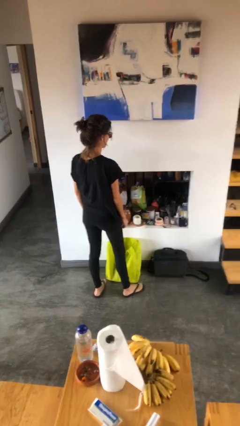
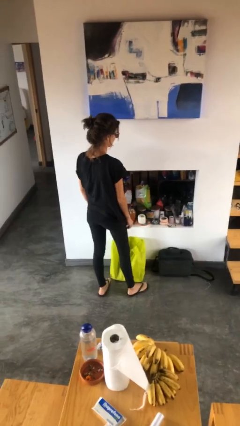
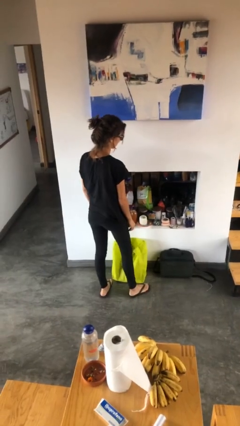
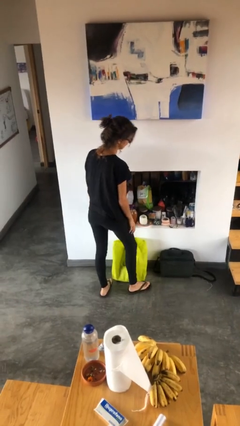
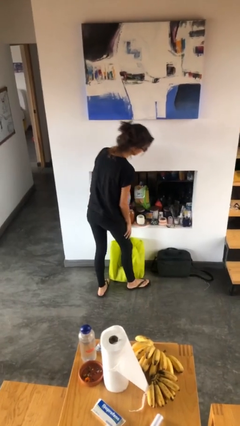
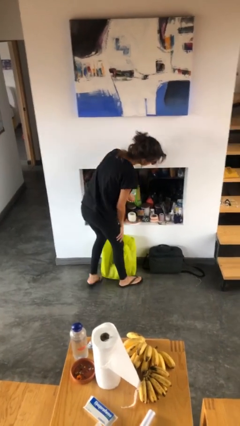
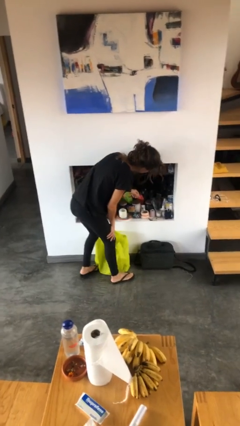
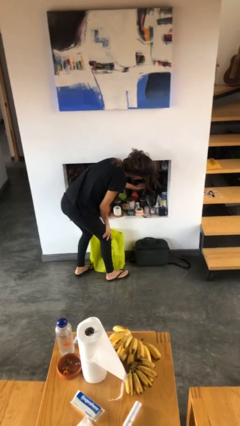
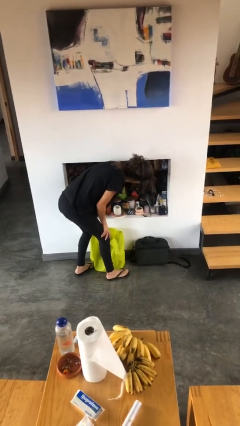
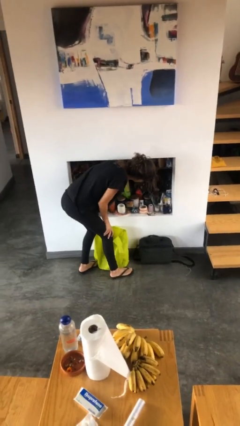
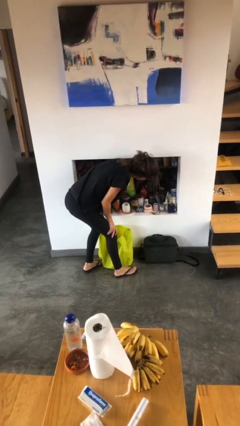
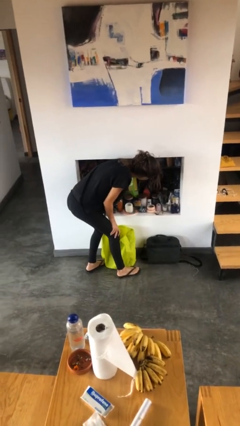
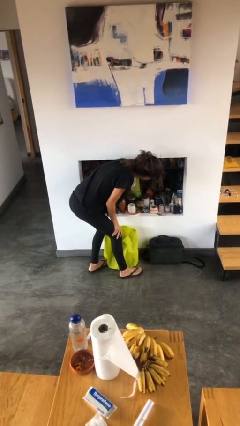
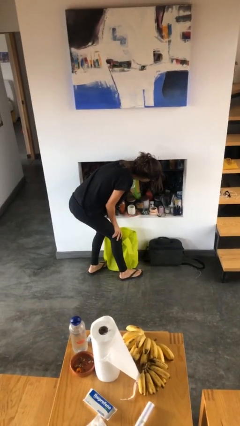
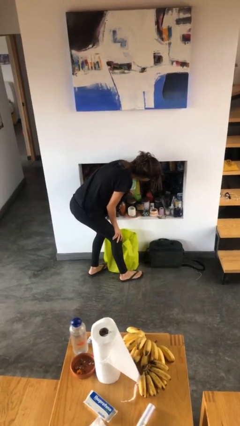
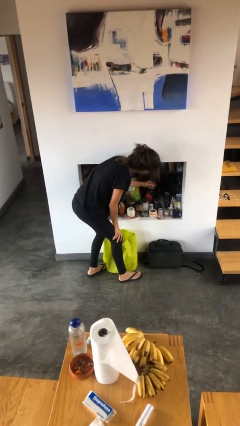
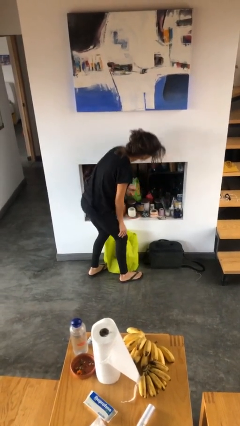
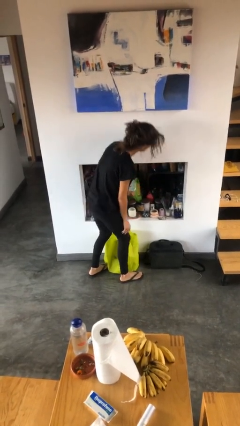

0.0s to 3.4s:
person searches in cabinet

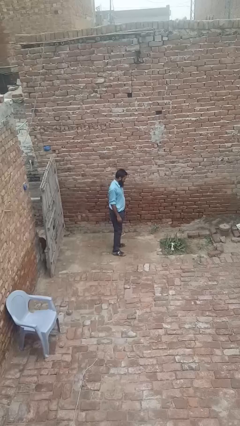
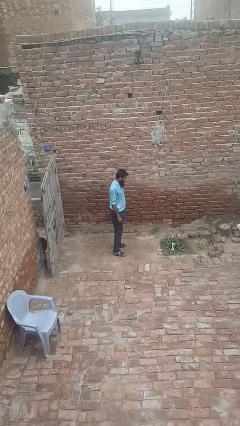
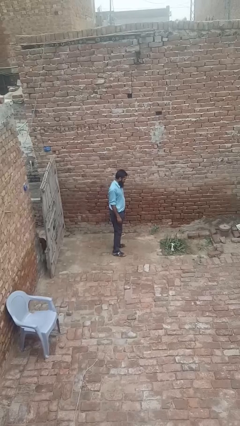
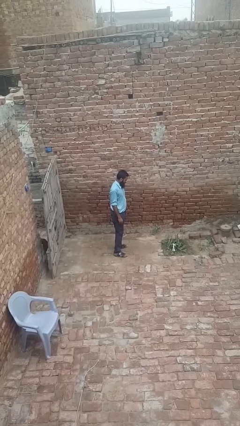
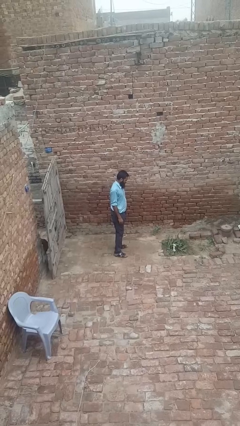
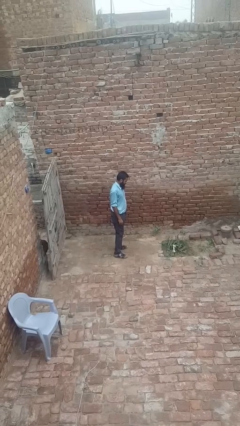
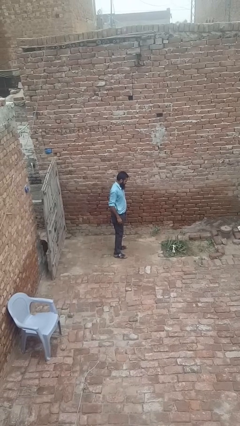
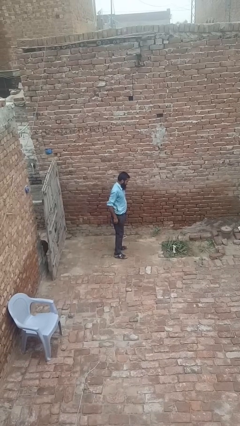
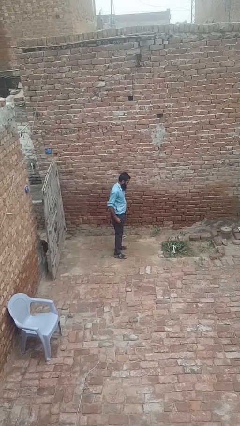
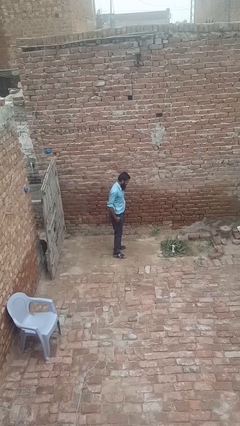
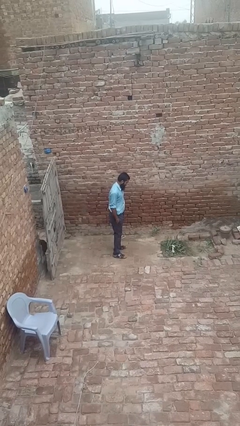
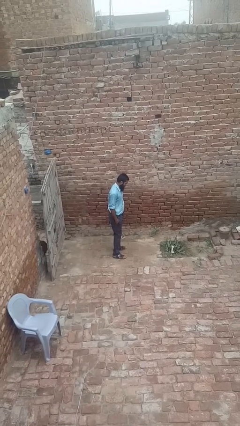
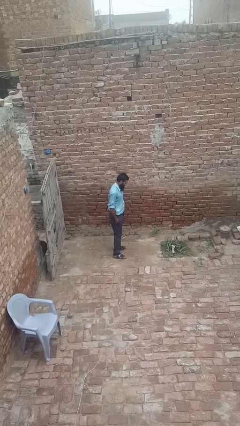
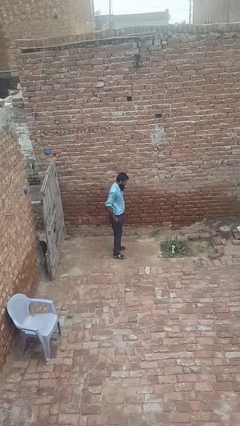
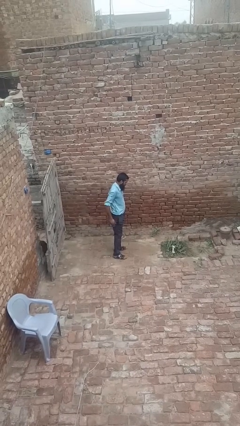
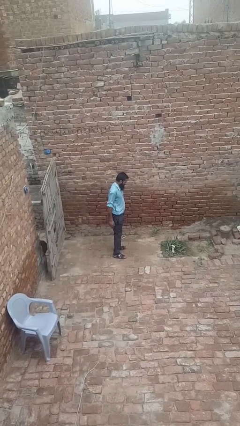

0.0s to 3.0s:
person puts hands in back pockets

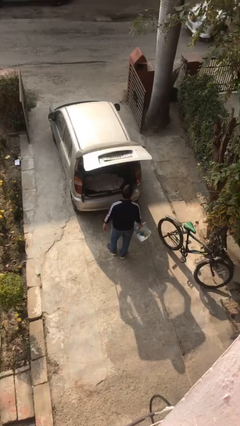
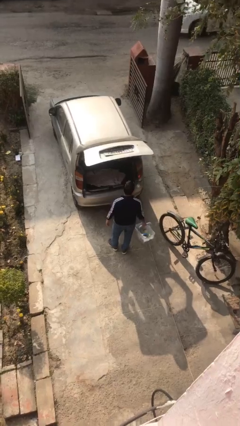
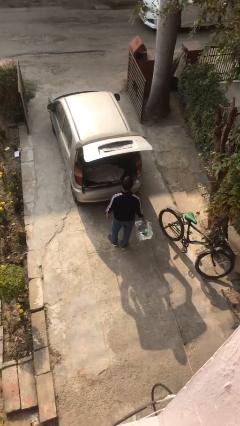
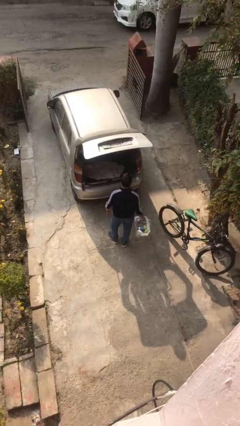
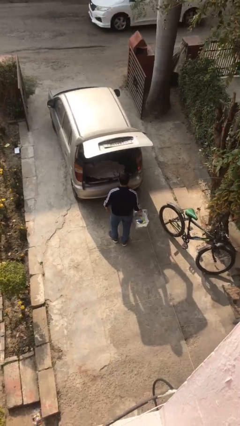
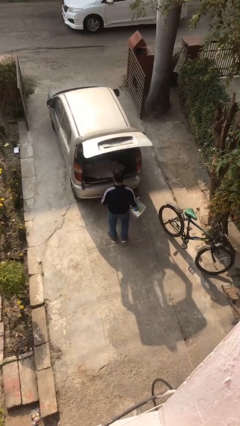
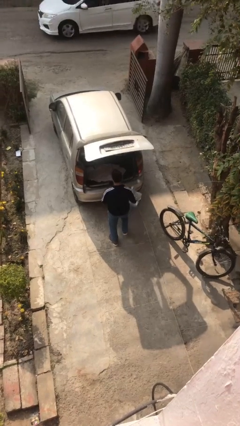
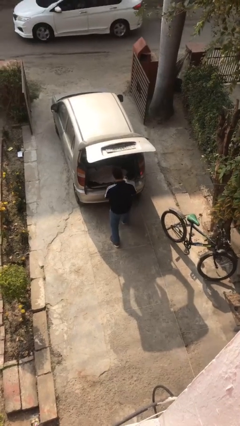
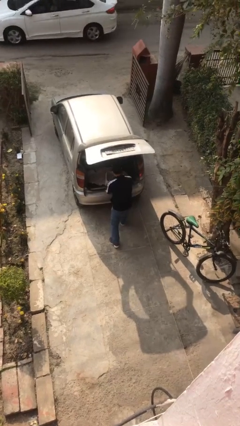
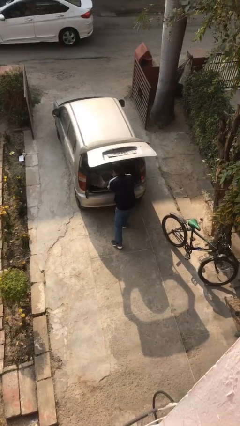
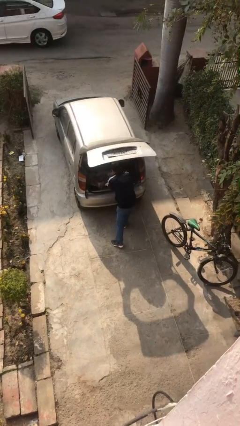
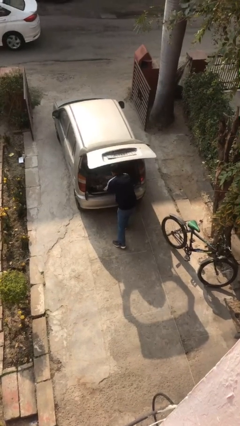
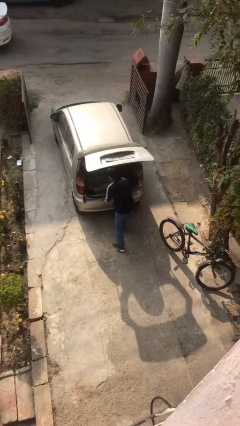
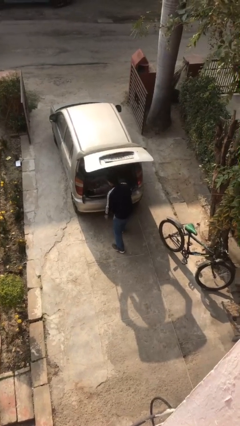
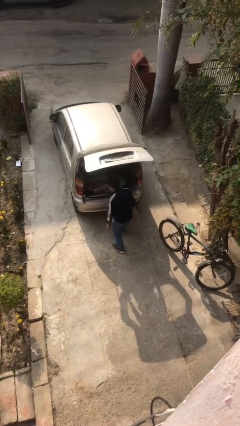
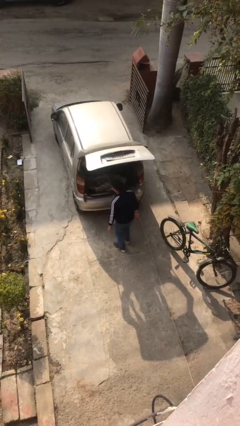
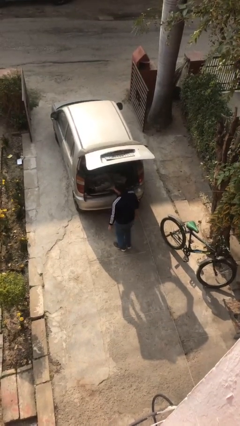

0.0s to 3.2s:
person loads car

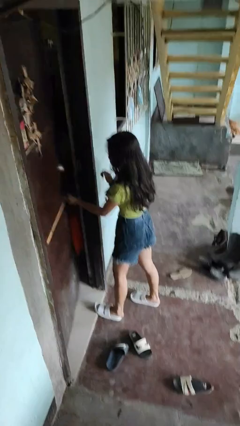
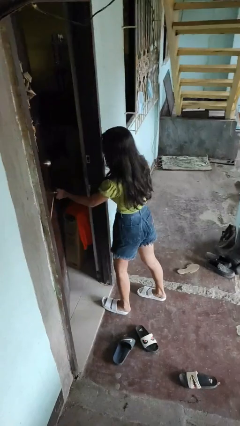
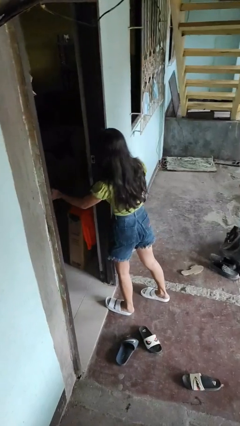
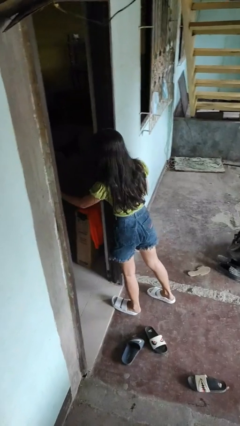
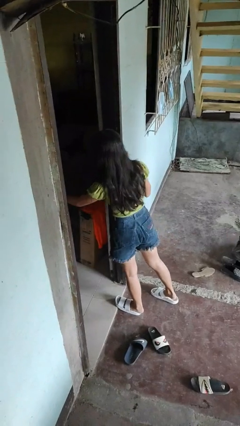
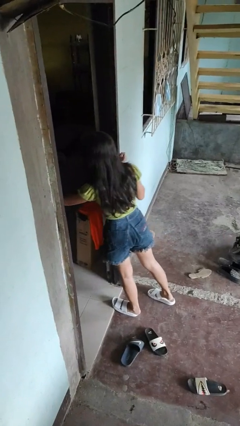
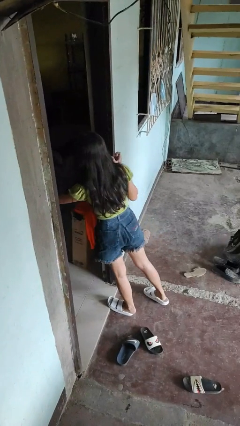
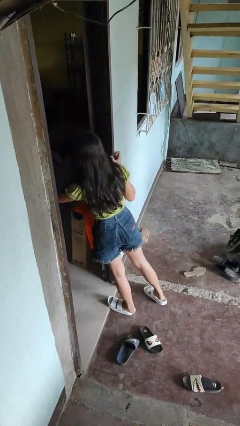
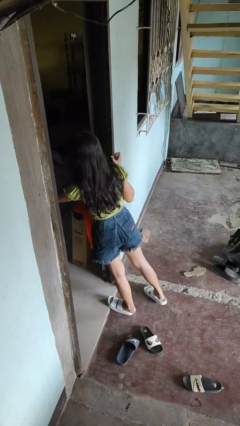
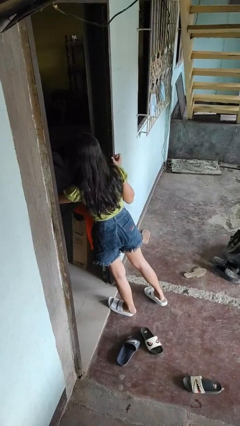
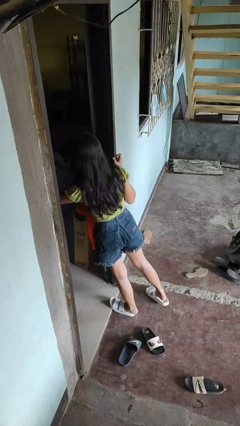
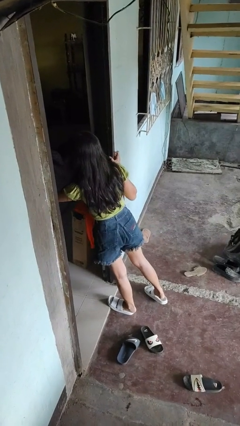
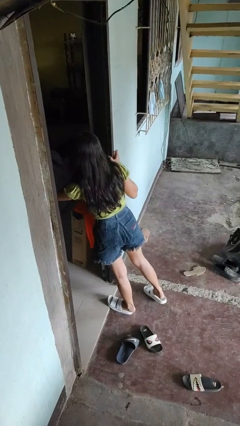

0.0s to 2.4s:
person opens facility door

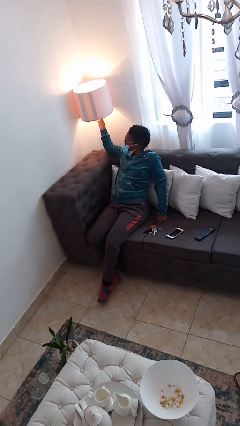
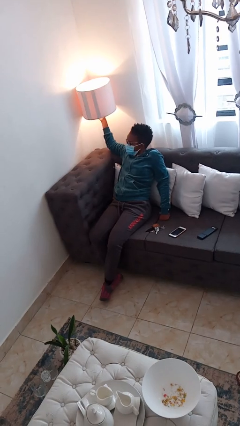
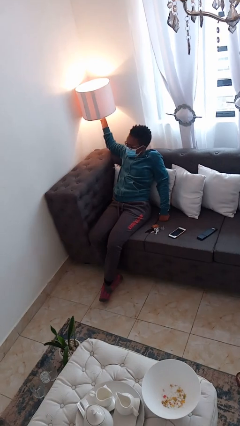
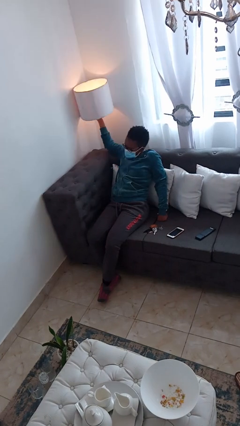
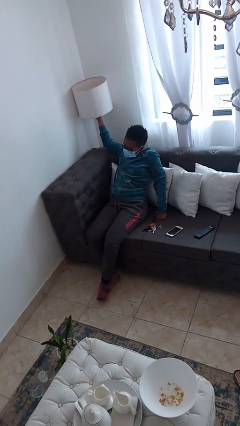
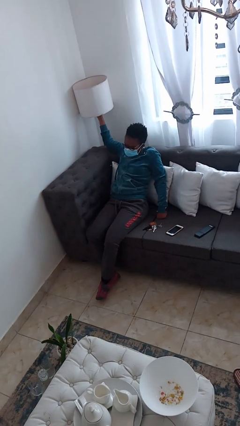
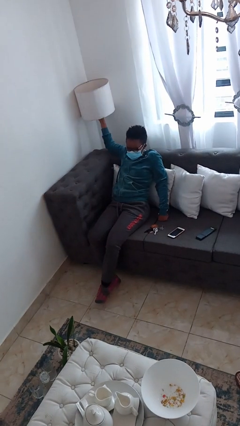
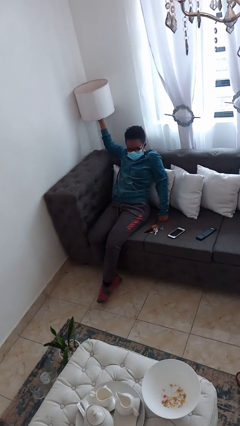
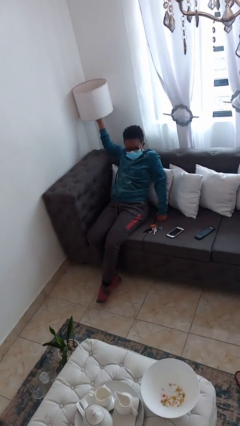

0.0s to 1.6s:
person turns off lamp

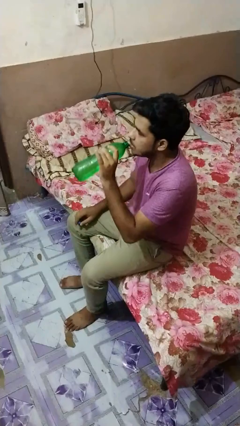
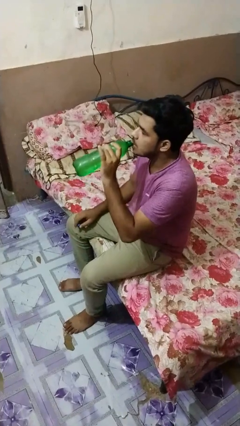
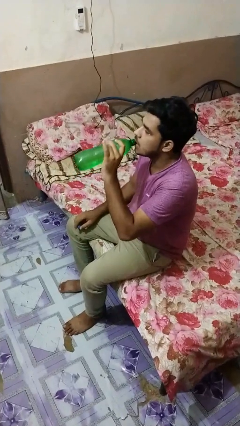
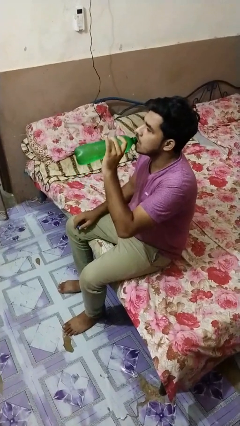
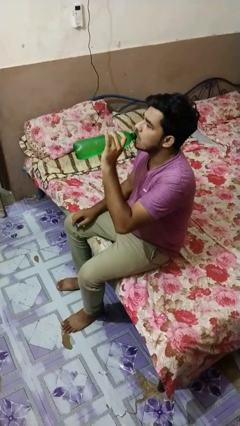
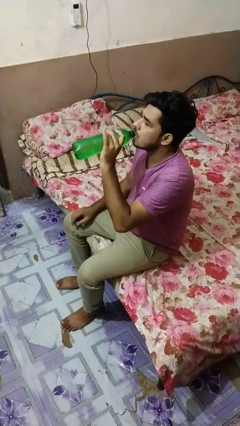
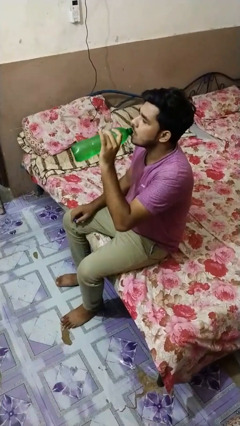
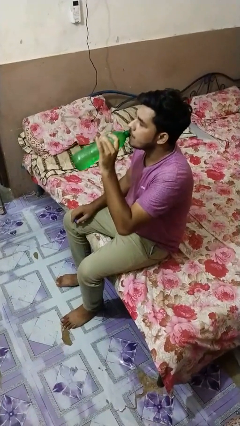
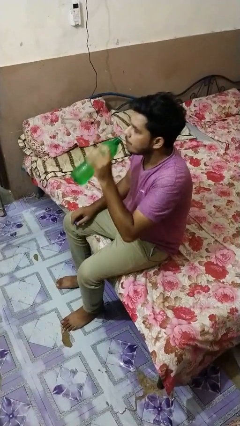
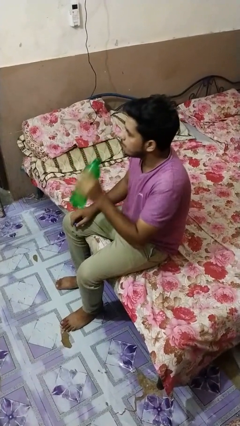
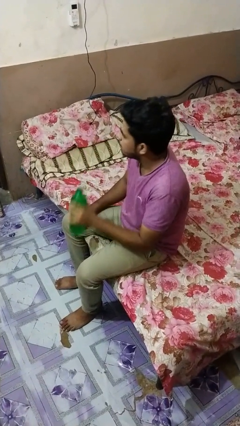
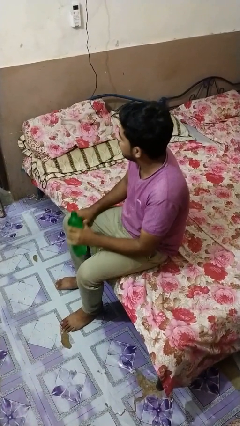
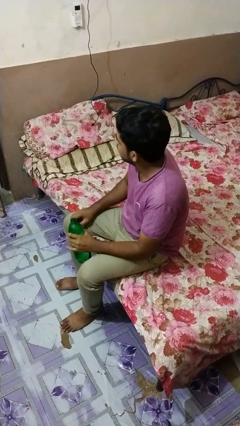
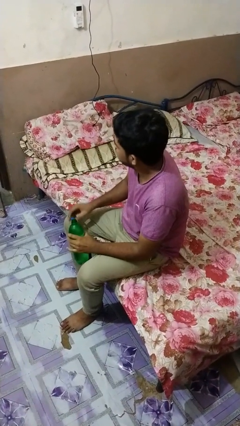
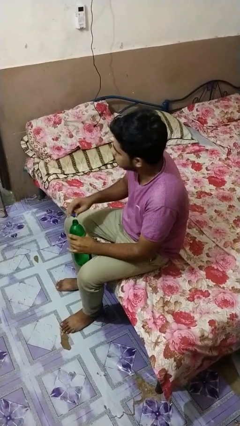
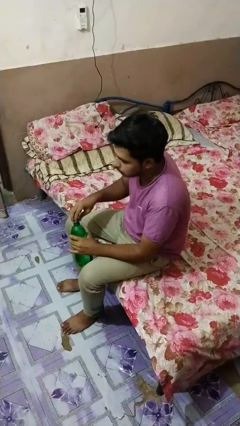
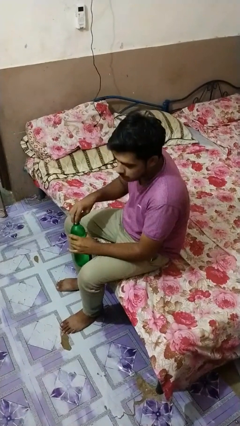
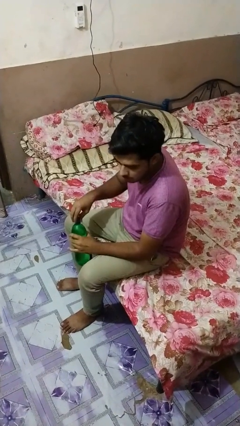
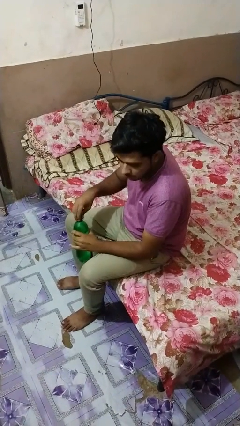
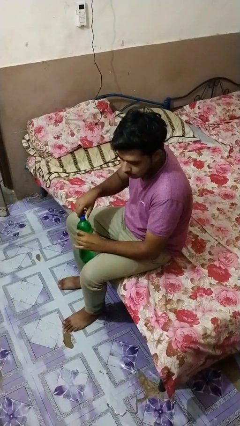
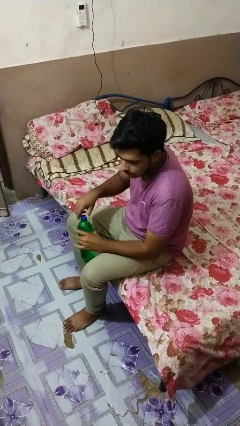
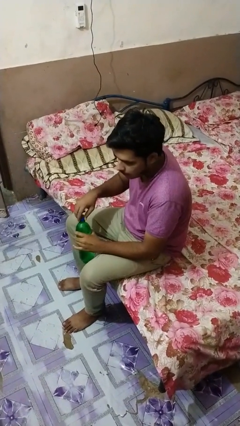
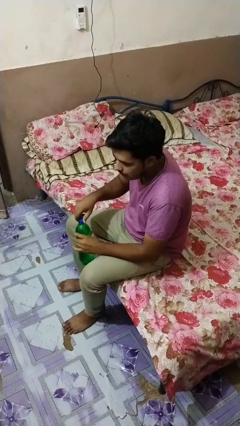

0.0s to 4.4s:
person drinks from bottle
